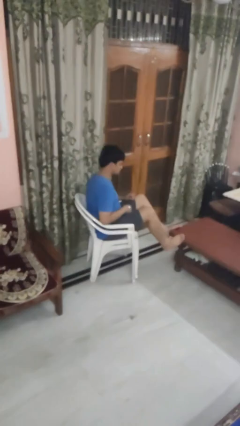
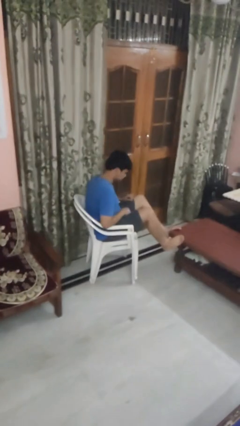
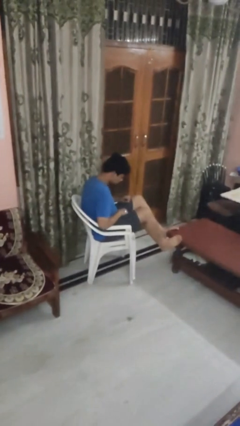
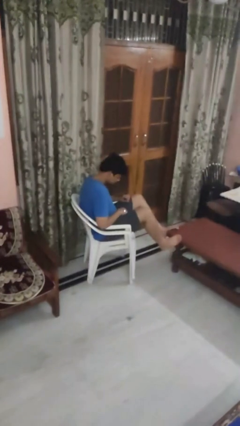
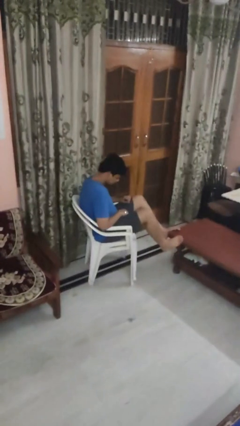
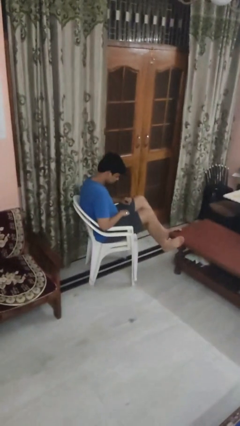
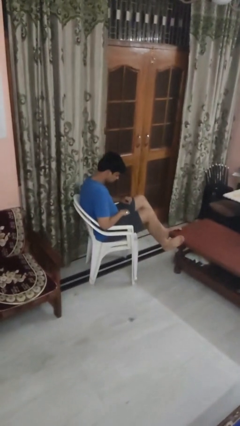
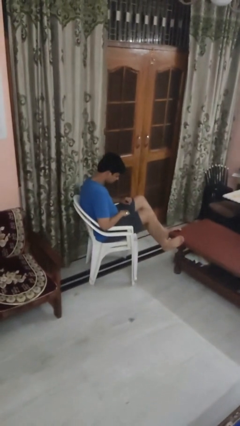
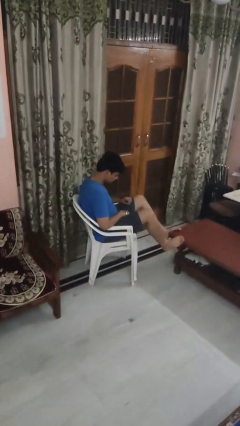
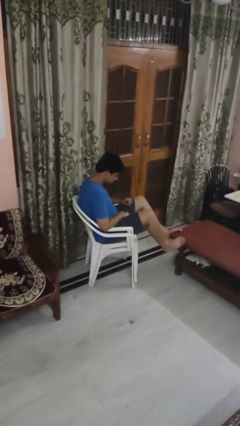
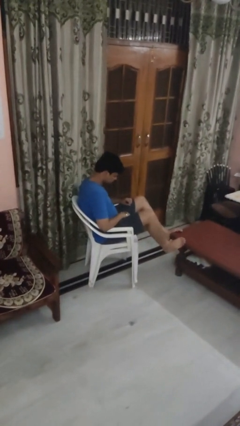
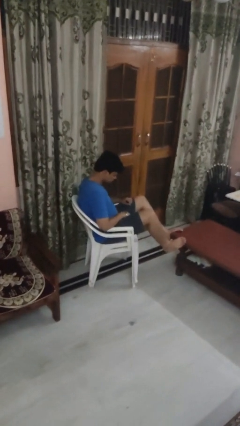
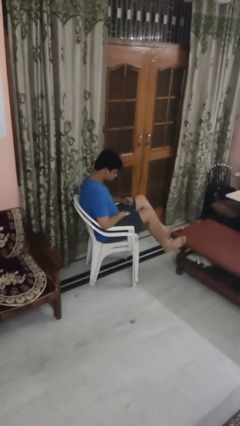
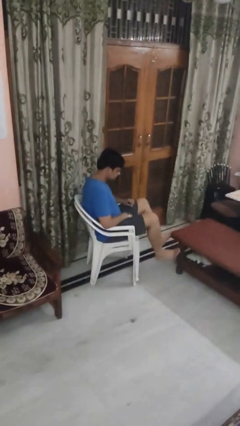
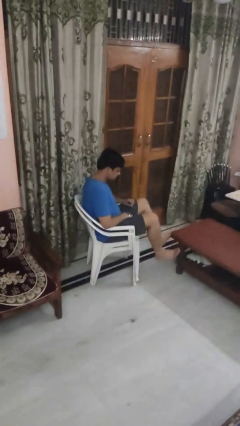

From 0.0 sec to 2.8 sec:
person puts feet up

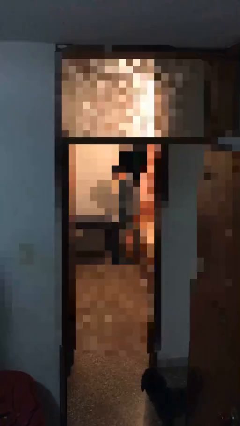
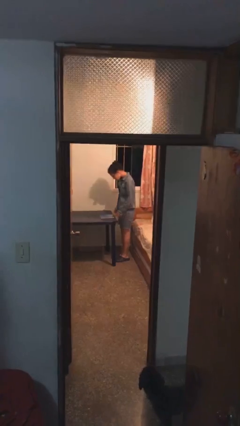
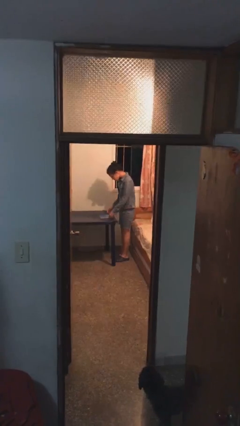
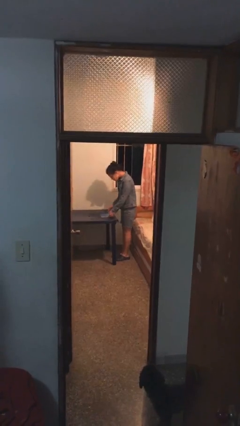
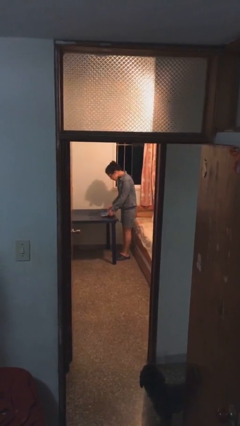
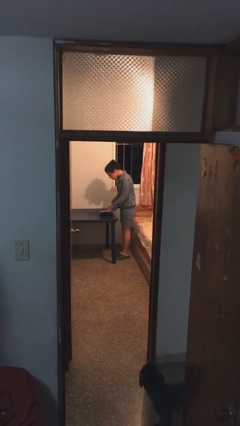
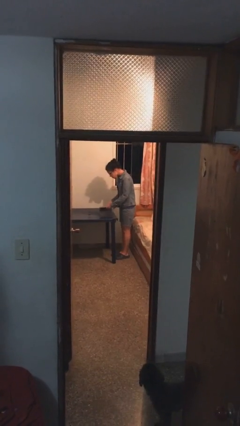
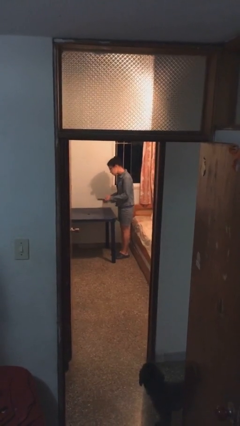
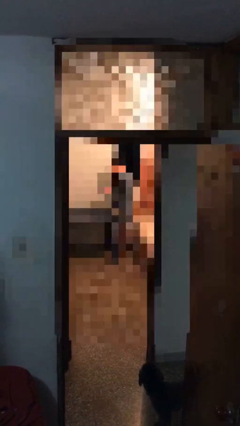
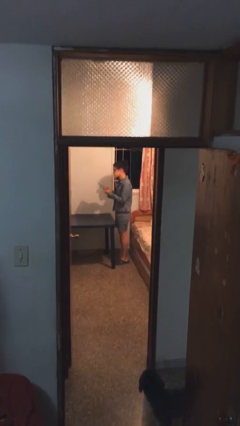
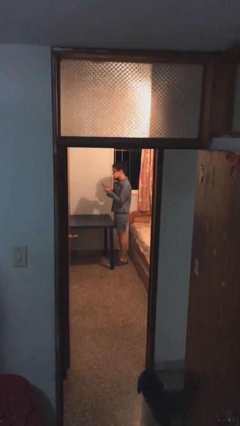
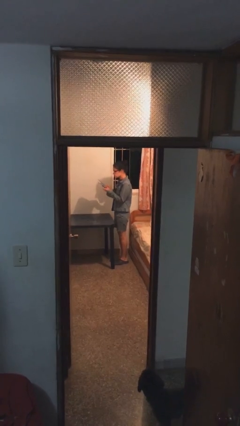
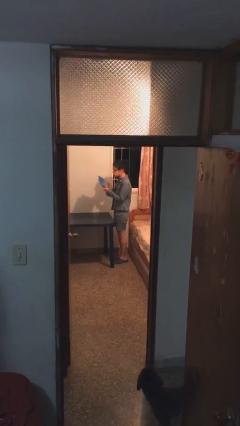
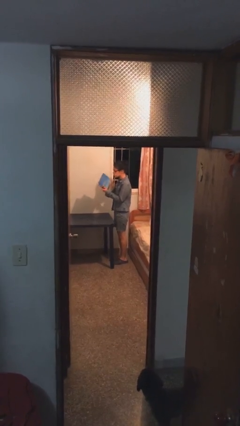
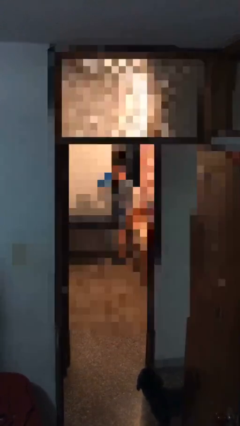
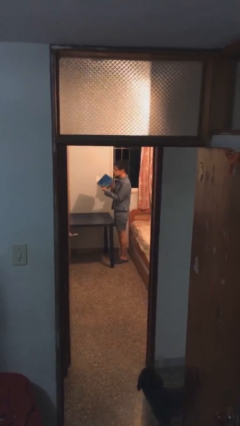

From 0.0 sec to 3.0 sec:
person picks up object from table

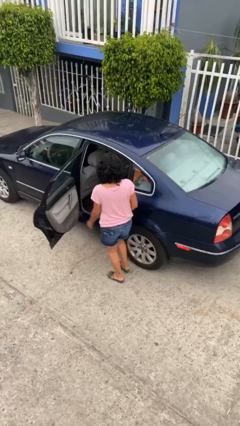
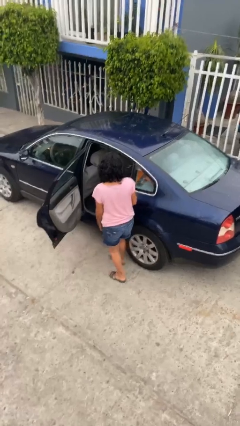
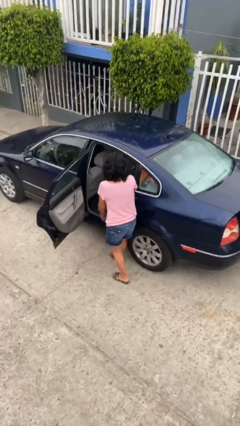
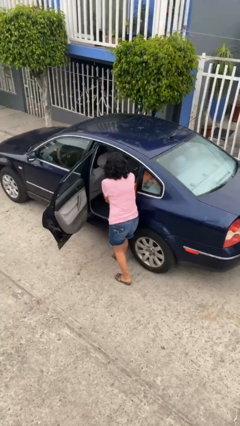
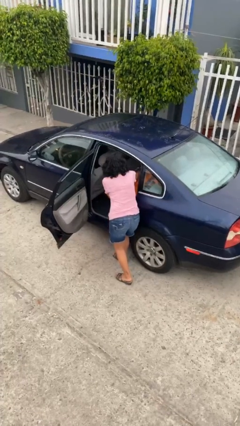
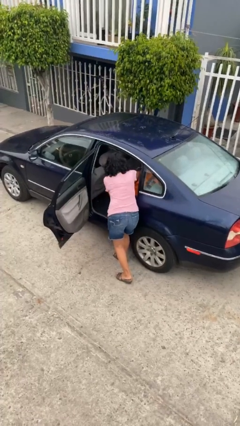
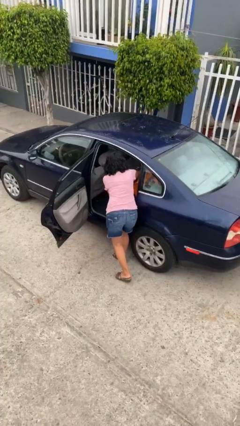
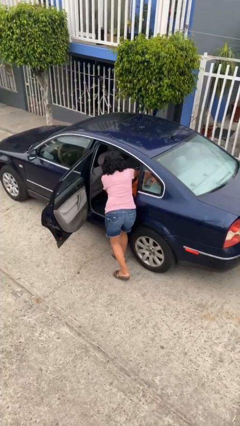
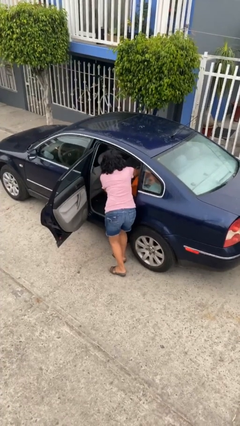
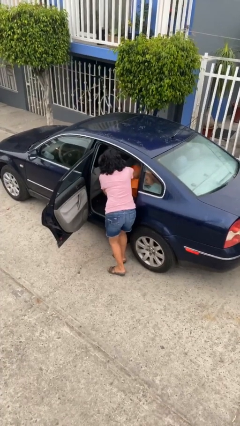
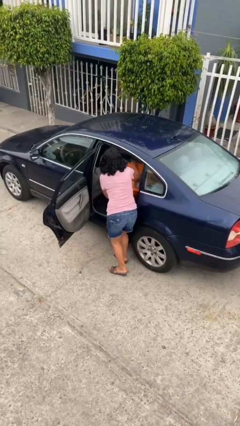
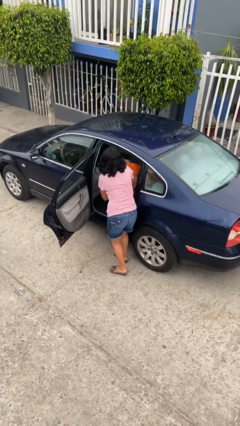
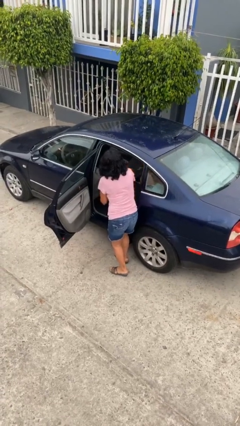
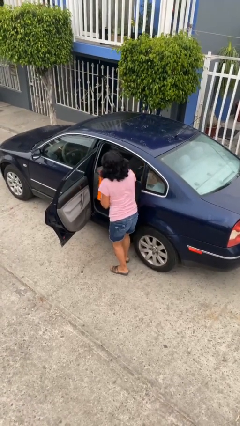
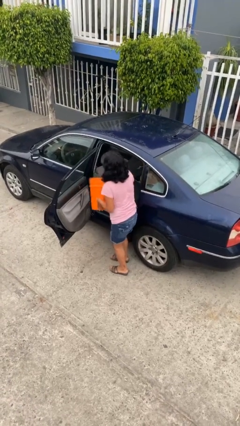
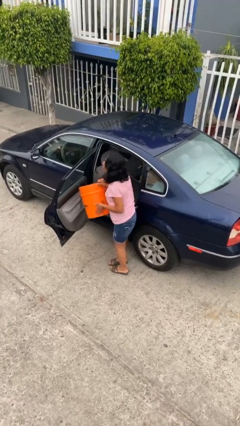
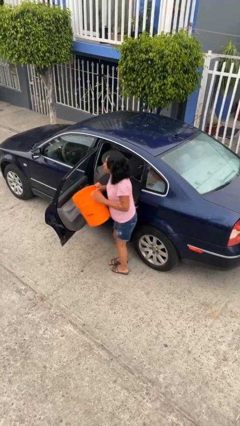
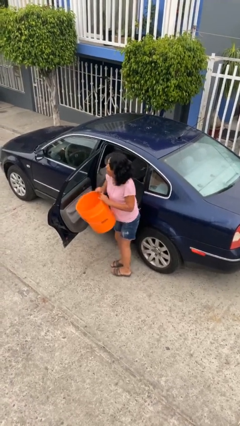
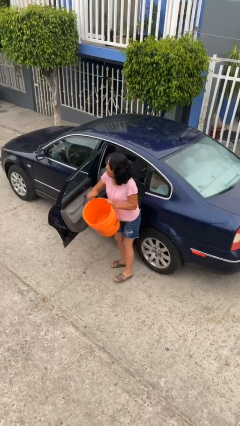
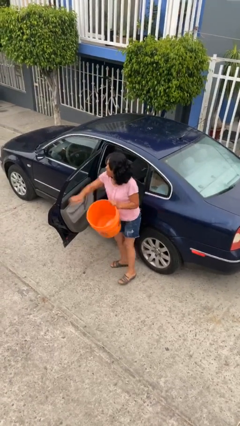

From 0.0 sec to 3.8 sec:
person unloads car

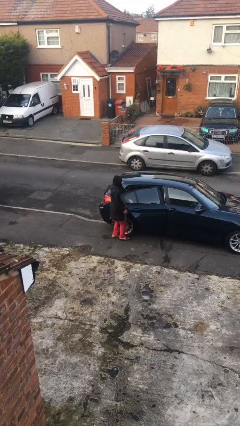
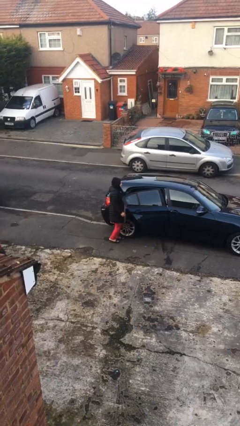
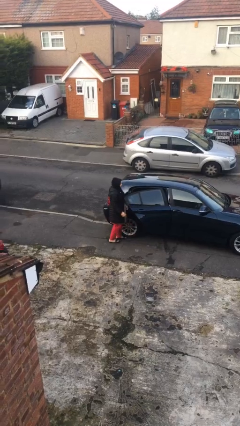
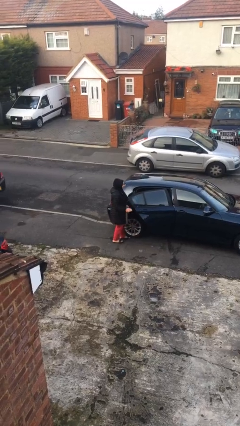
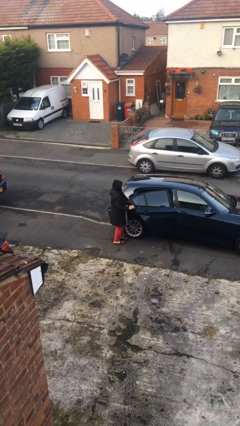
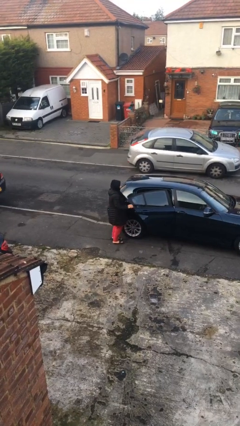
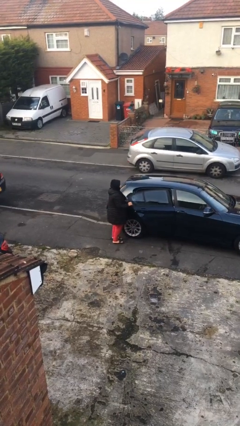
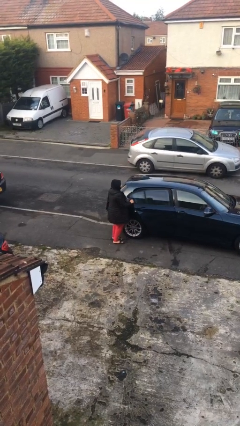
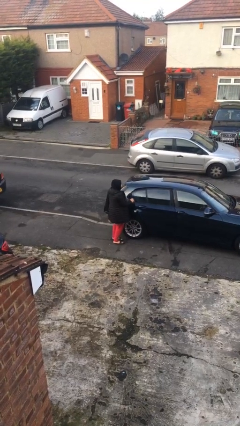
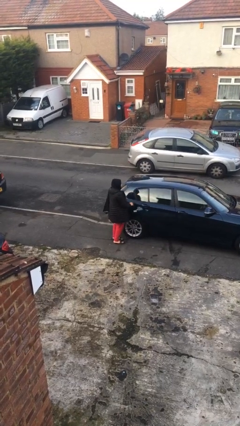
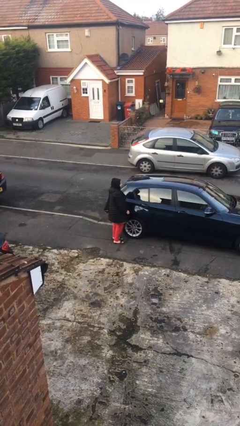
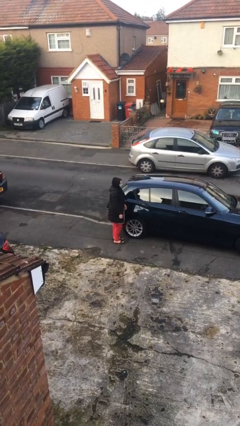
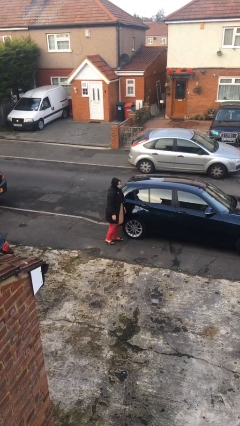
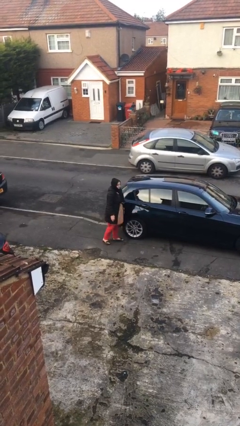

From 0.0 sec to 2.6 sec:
person closes car door

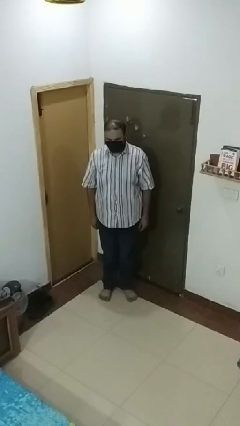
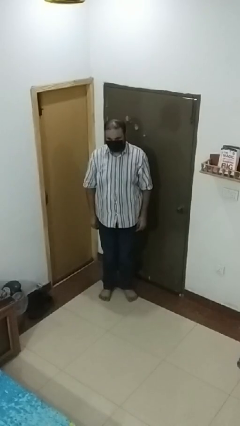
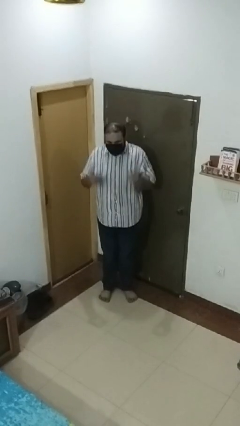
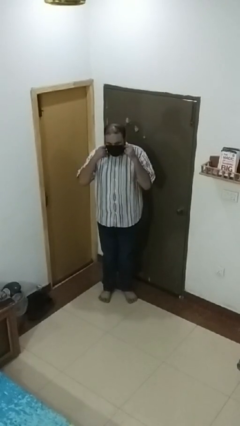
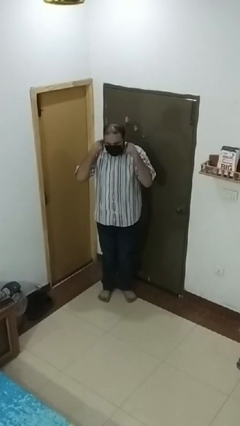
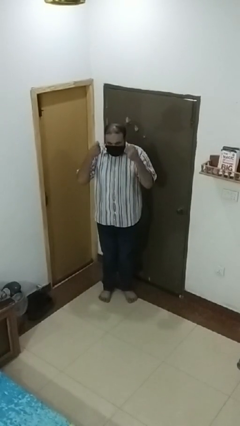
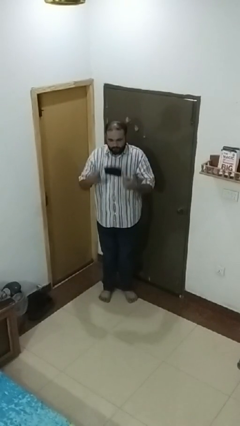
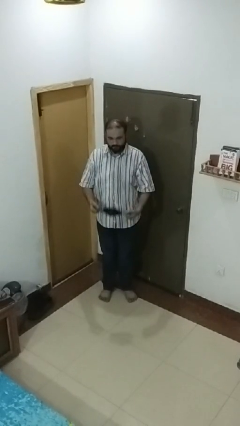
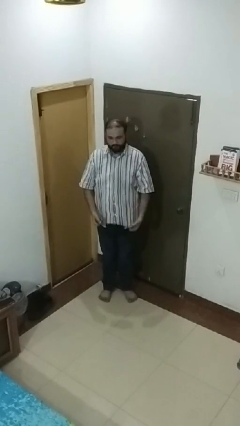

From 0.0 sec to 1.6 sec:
person takes off facemask

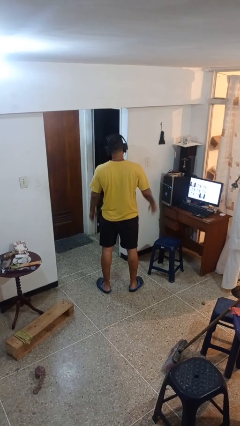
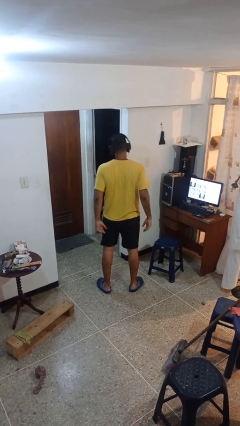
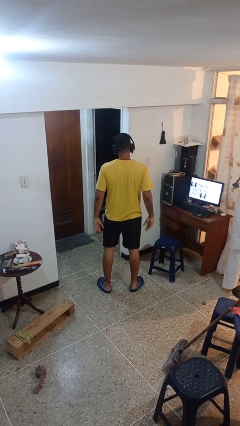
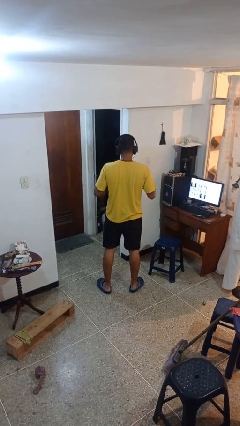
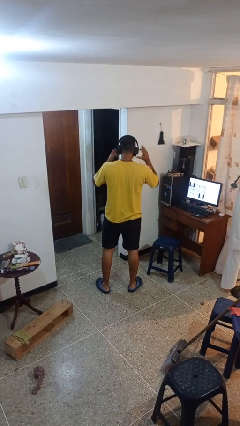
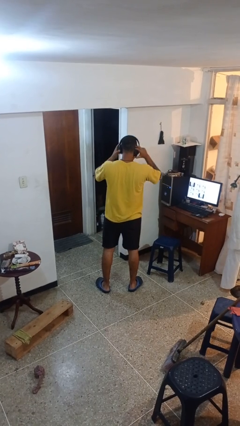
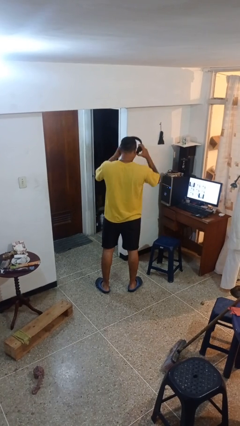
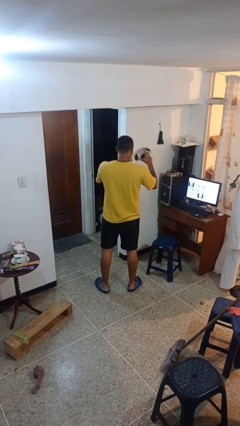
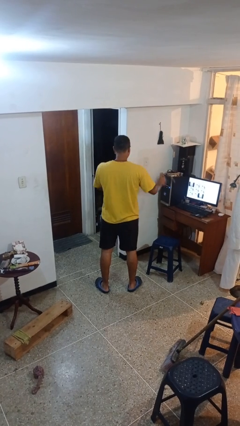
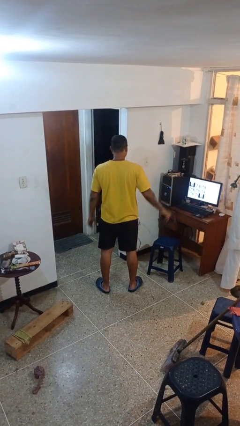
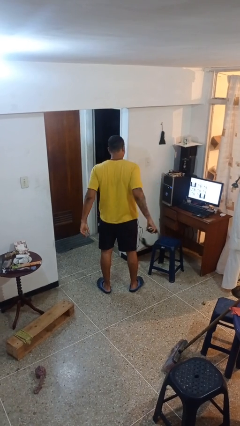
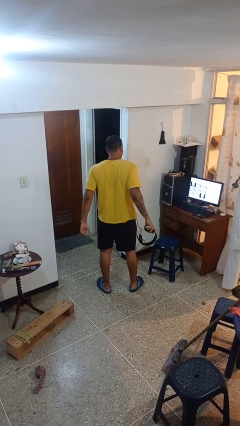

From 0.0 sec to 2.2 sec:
person takes off headphones

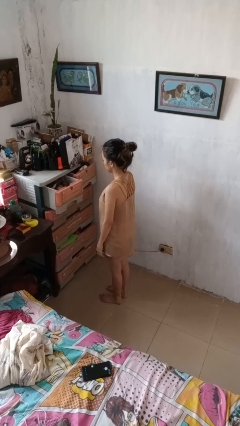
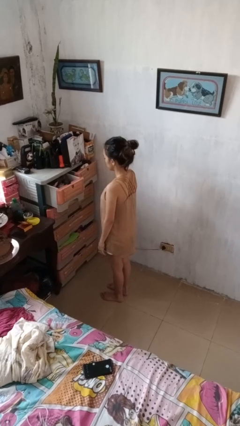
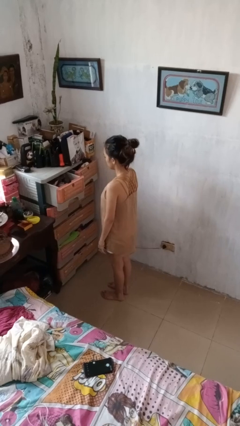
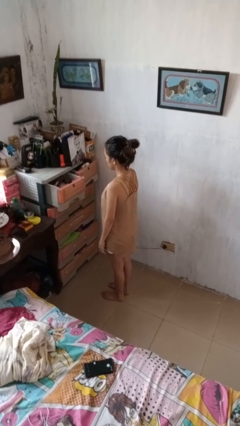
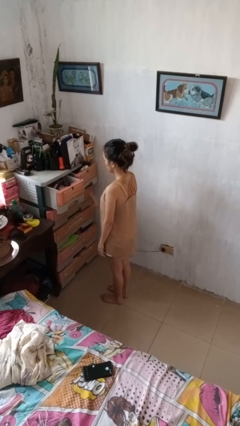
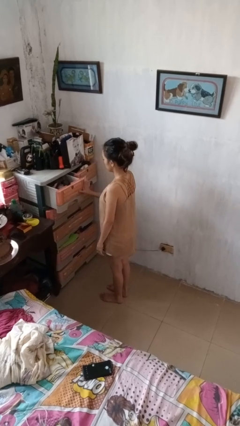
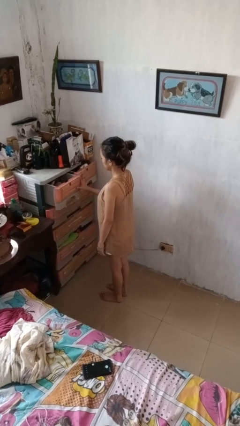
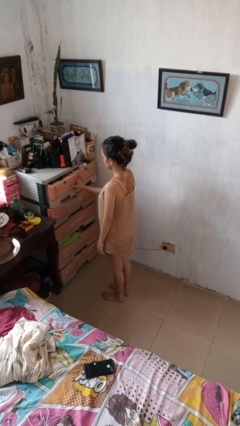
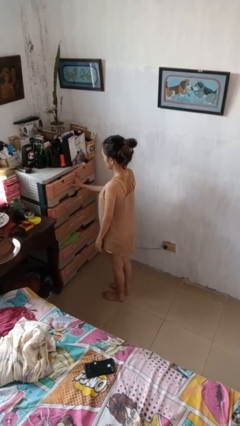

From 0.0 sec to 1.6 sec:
person closes dresser drawer
